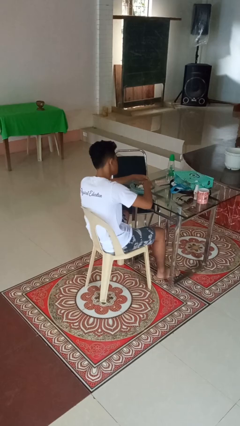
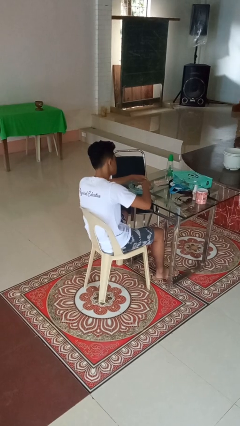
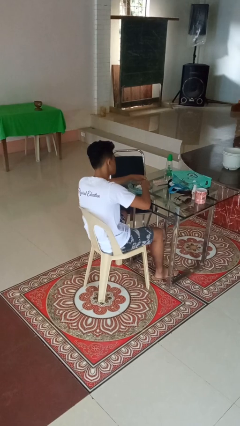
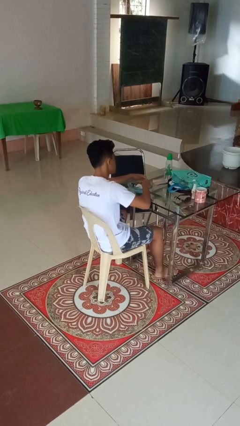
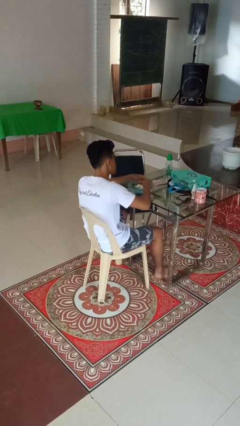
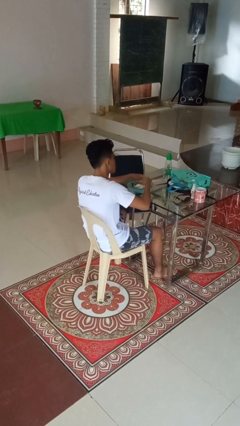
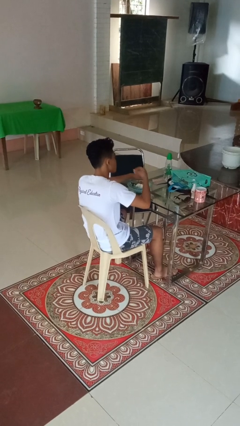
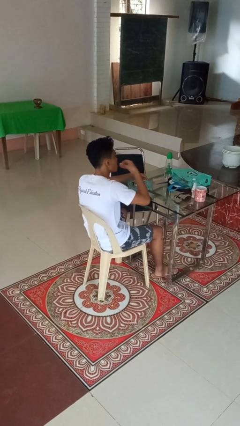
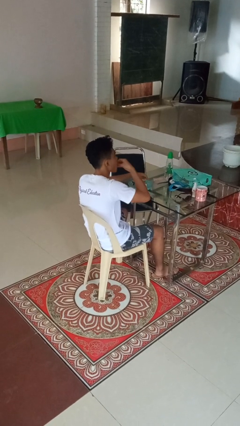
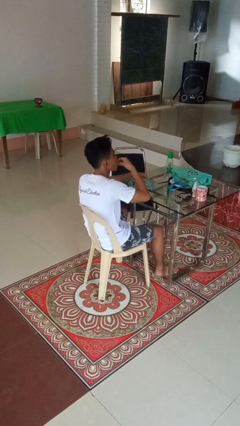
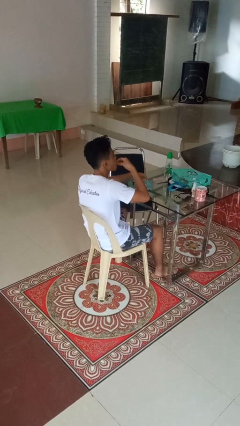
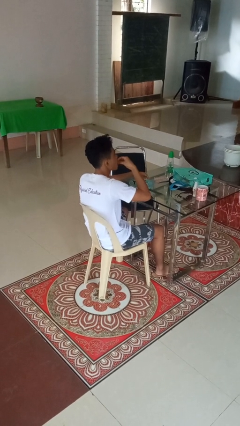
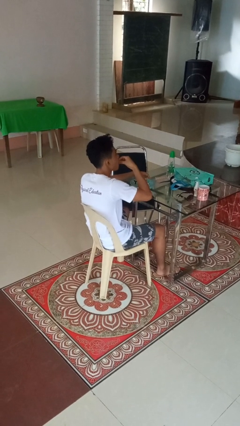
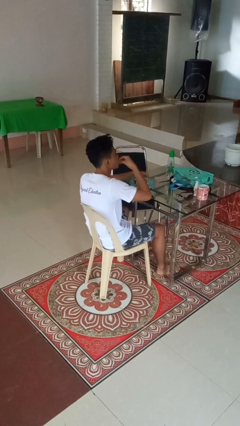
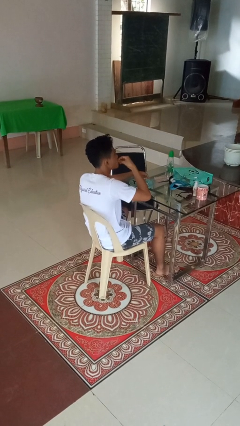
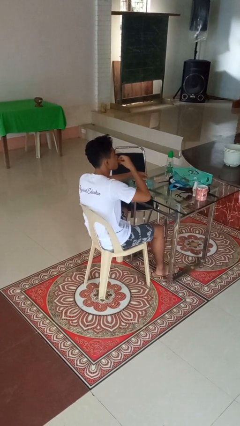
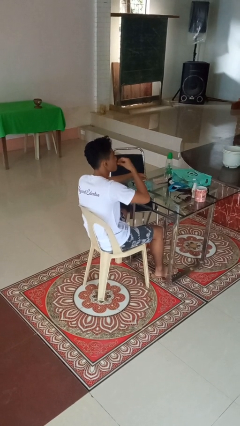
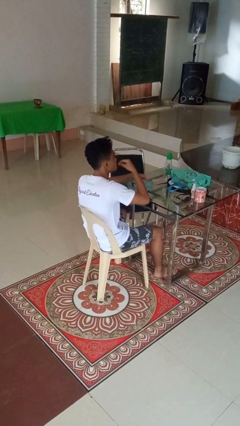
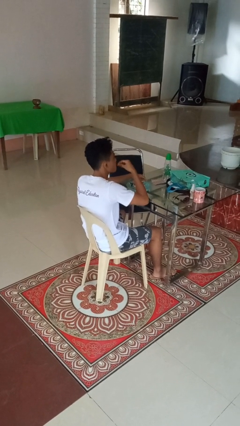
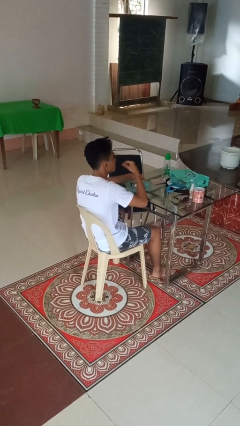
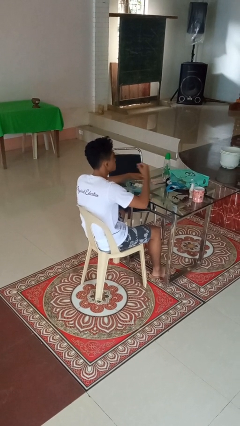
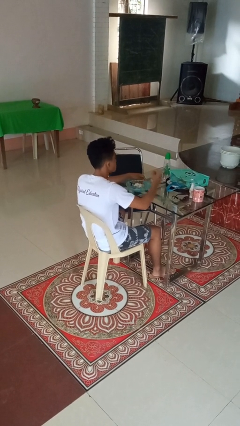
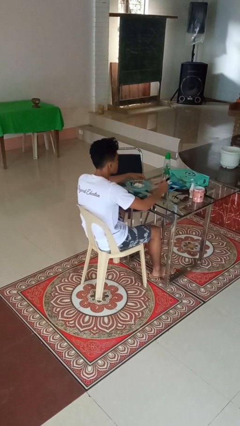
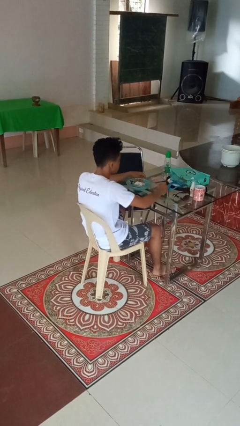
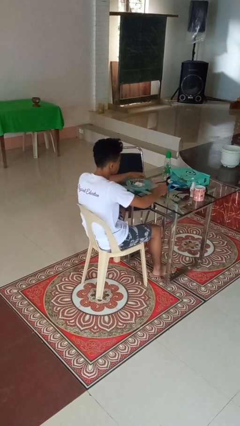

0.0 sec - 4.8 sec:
person eats with hands

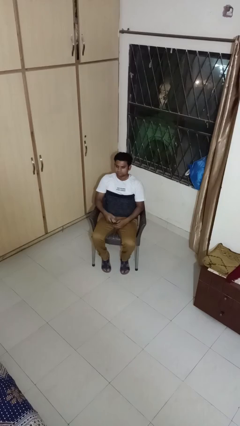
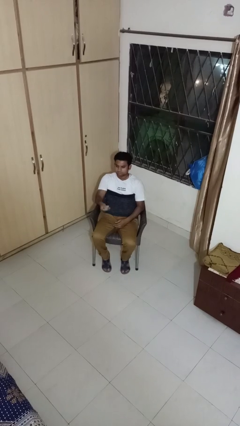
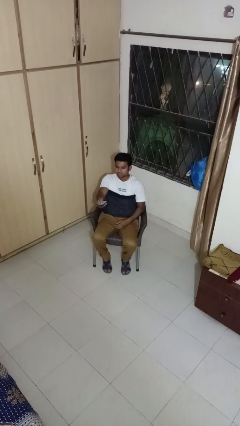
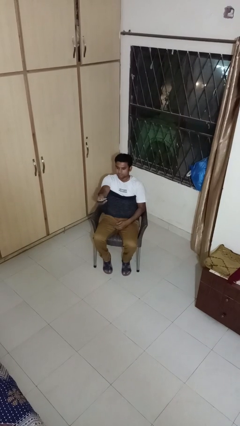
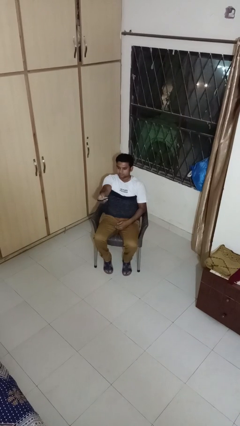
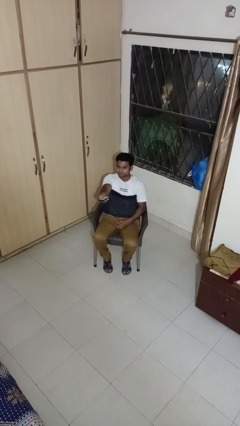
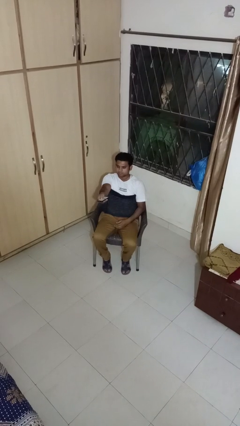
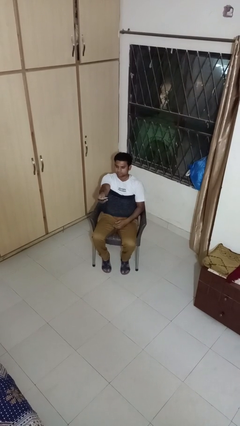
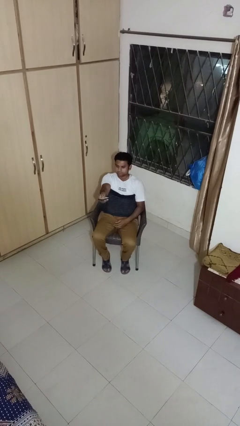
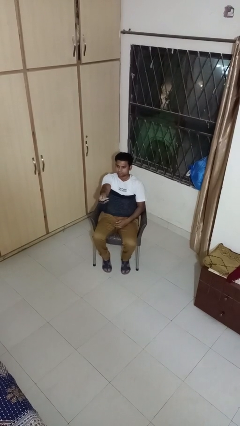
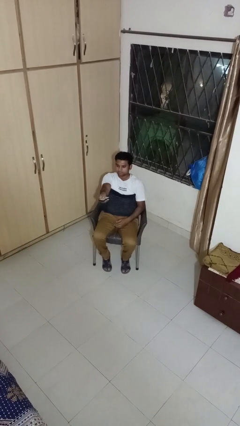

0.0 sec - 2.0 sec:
person uses television remote

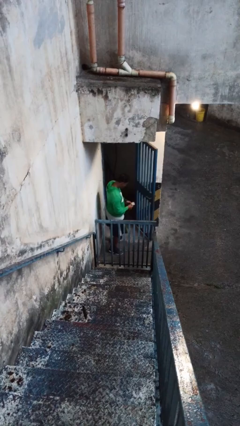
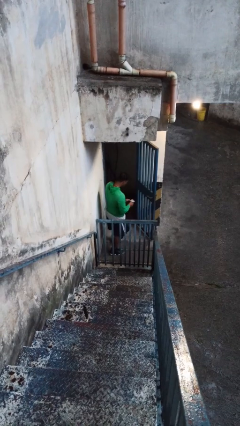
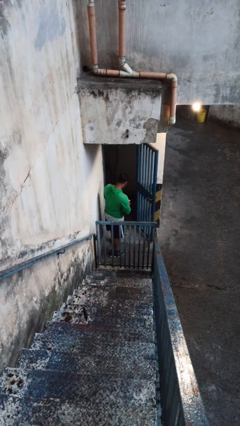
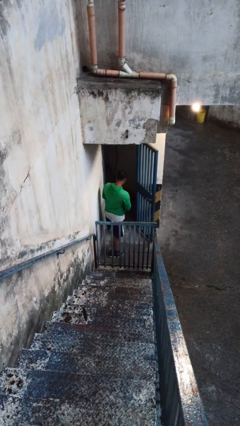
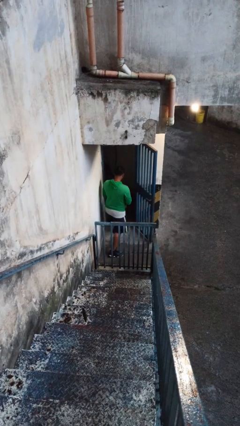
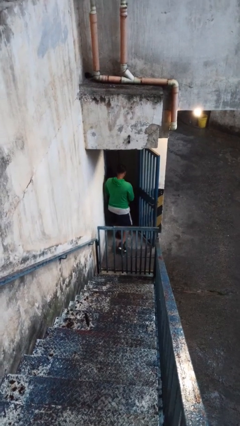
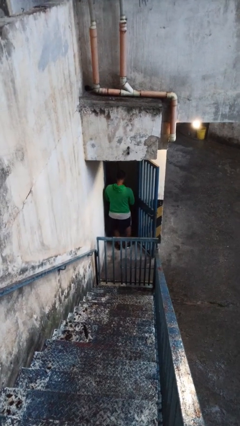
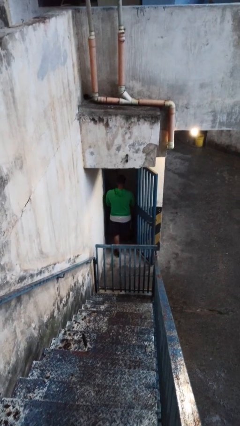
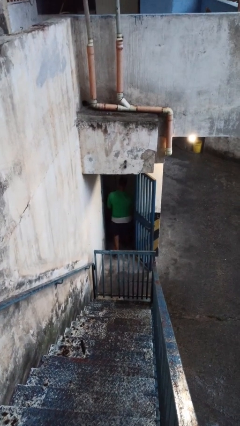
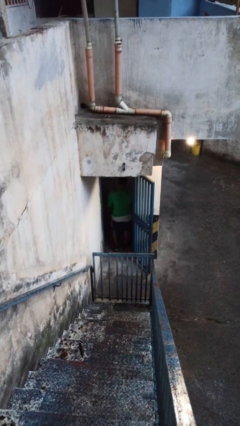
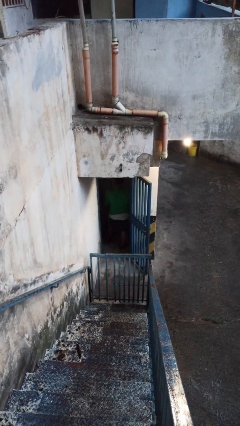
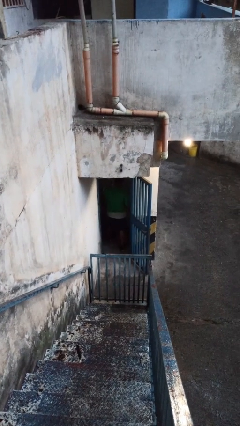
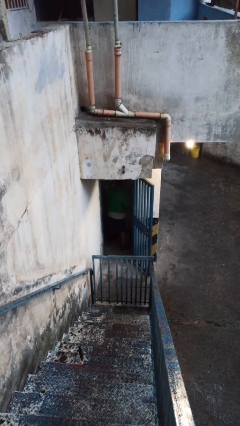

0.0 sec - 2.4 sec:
person exits scene through structure

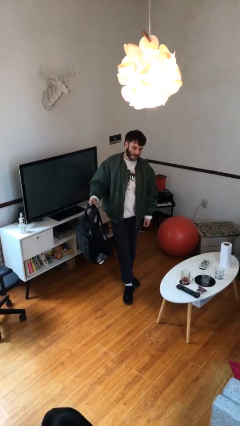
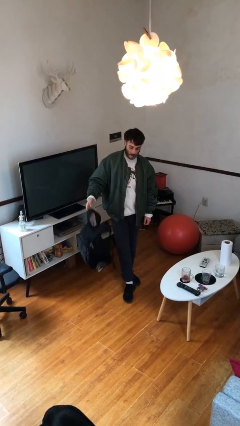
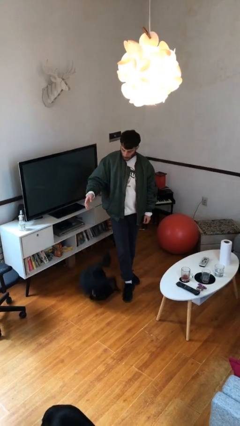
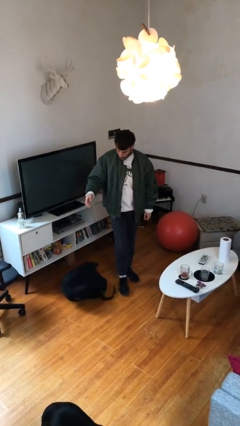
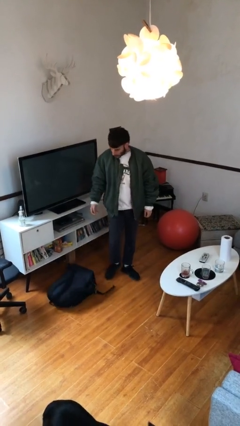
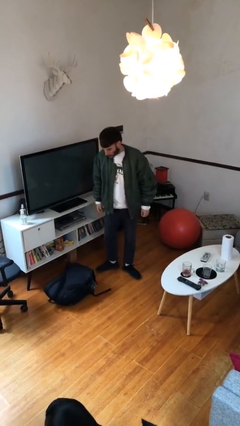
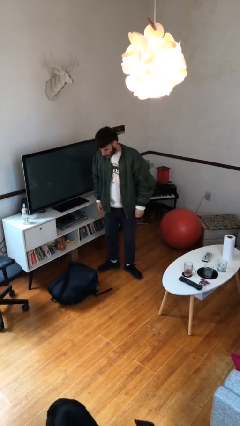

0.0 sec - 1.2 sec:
person drops object

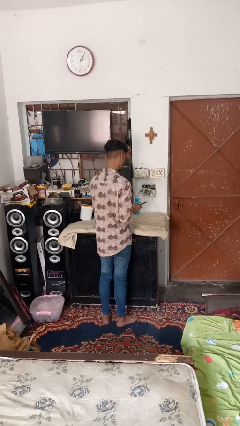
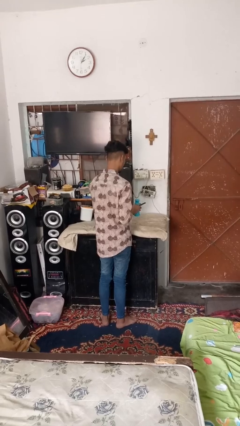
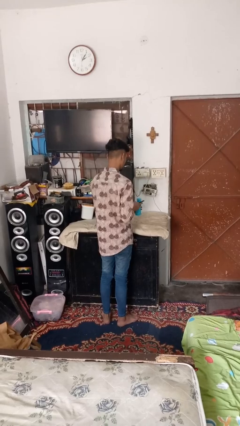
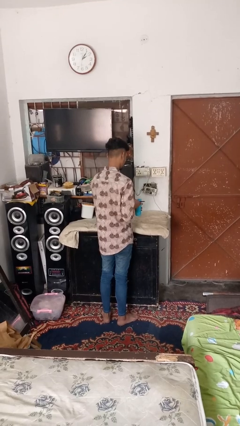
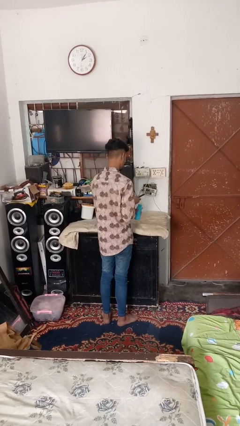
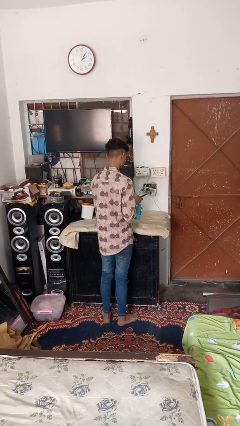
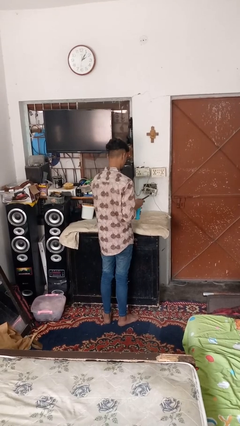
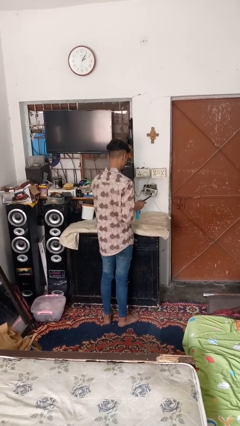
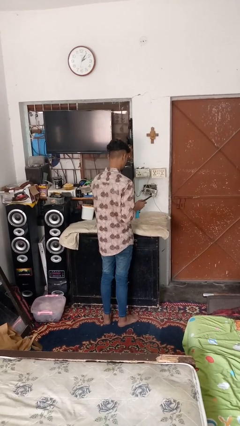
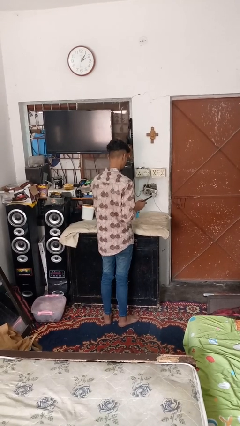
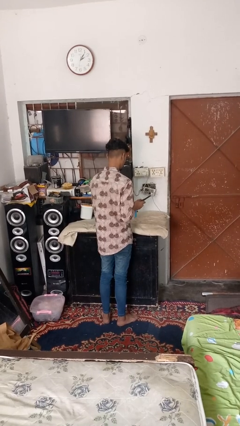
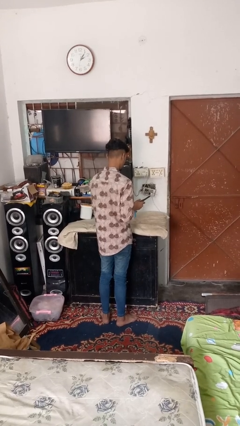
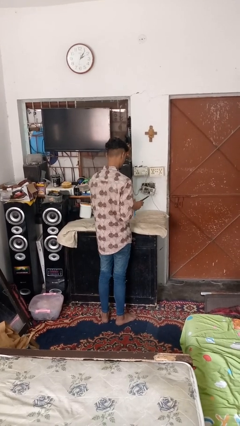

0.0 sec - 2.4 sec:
person opens can with can opener

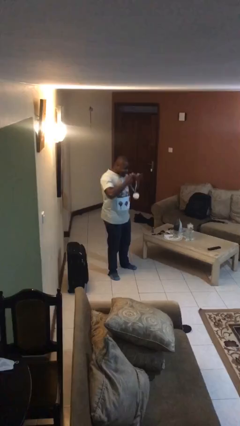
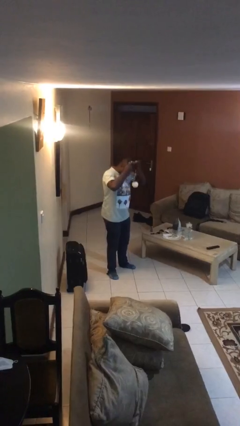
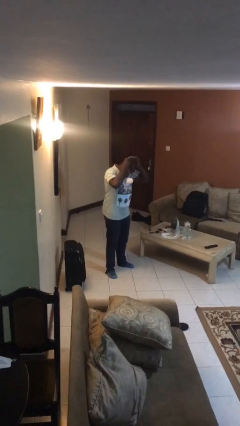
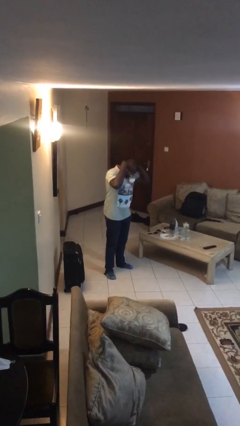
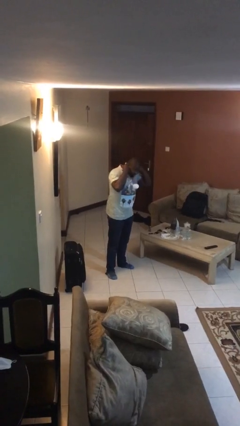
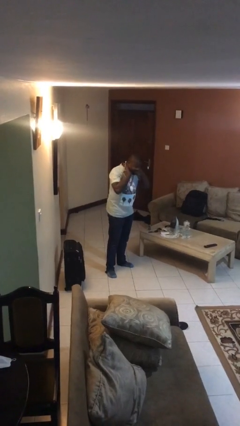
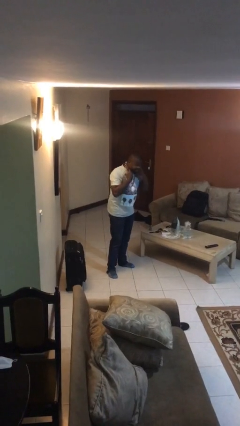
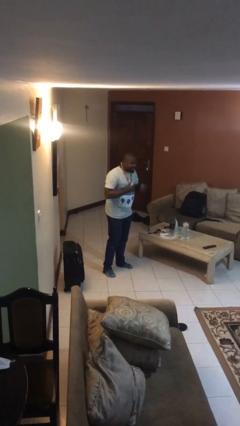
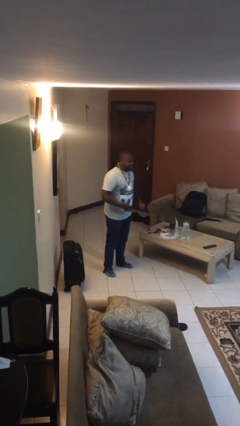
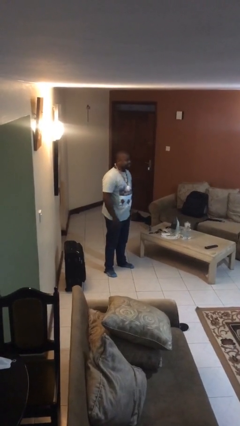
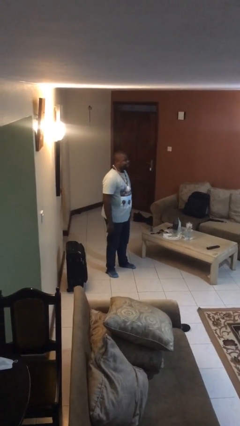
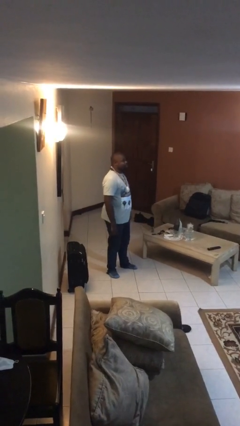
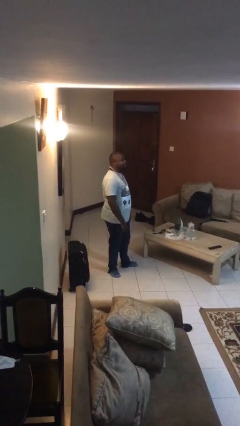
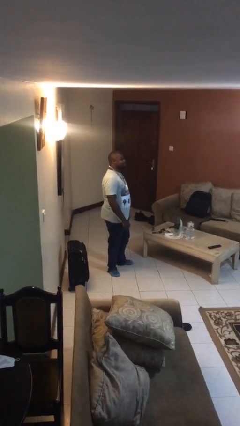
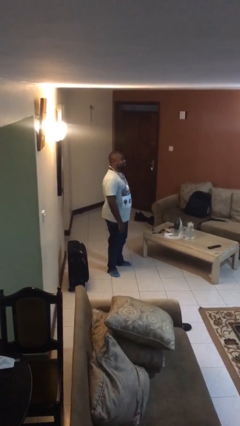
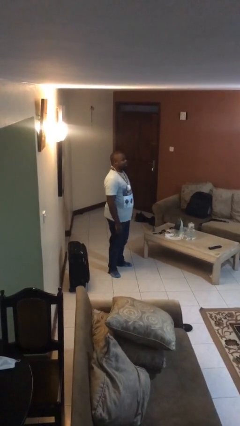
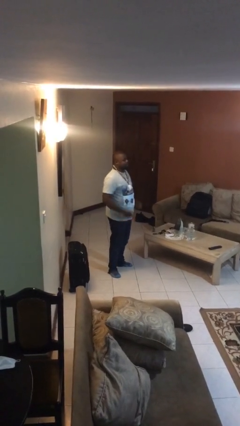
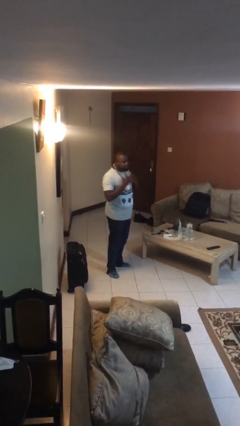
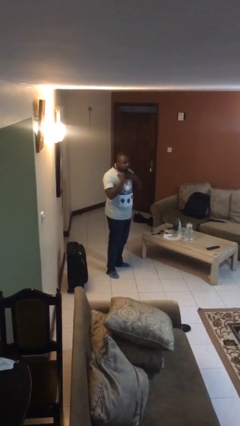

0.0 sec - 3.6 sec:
person puts on necklace

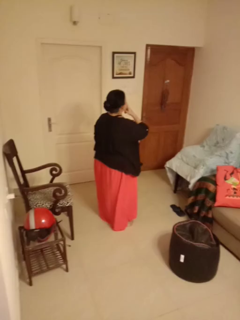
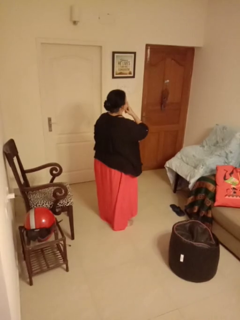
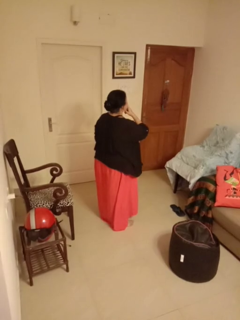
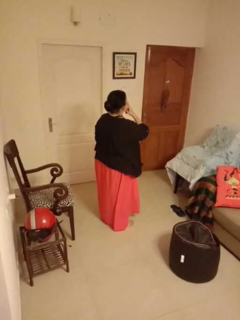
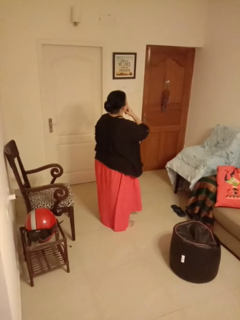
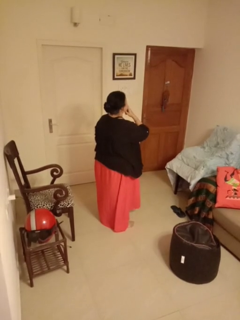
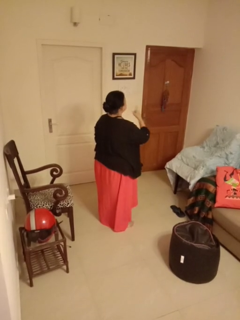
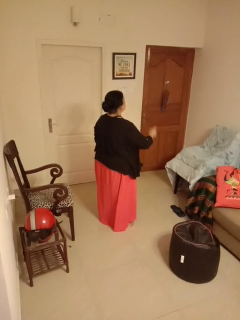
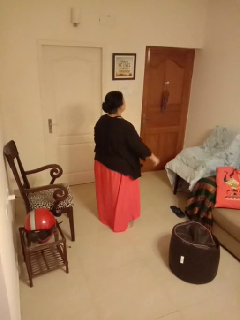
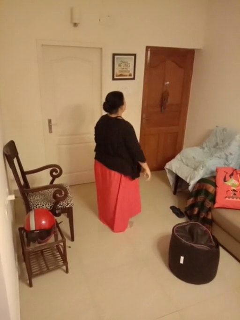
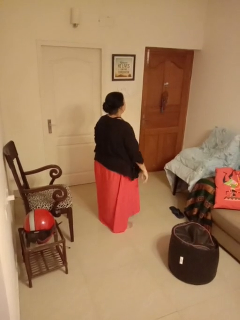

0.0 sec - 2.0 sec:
person gestures be quiet
